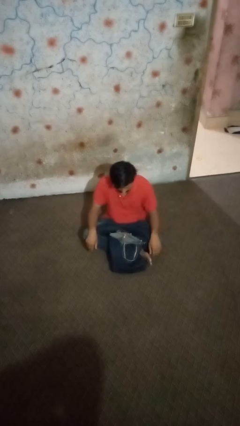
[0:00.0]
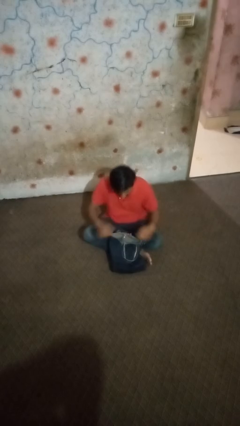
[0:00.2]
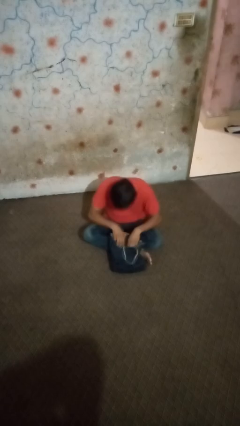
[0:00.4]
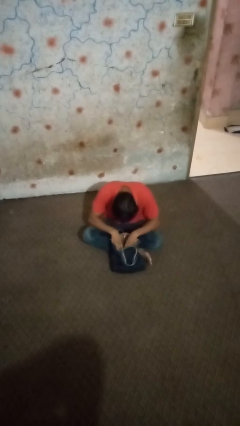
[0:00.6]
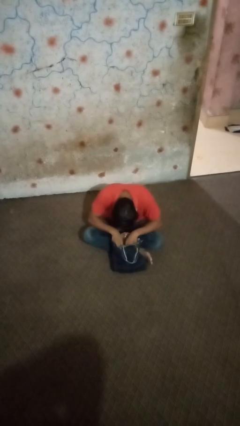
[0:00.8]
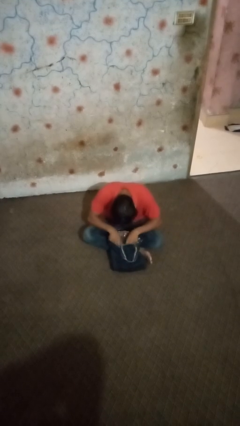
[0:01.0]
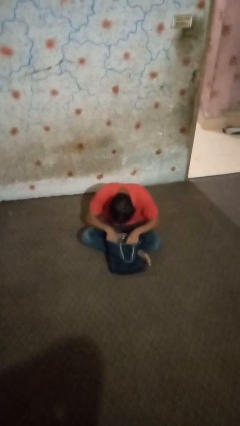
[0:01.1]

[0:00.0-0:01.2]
person searches in bag

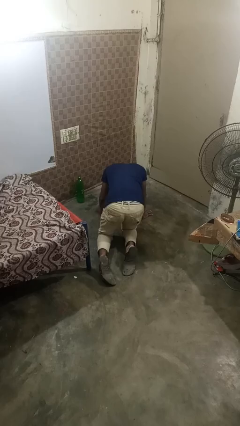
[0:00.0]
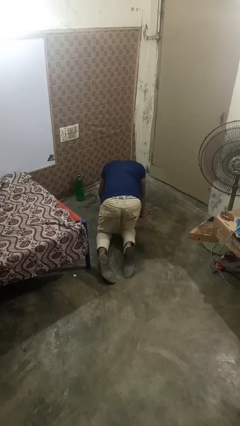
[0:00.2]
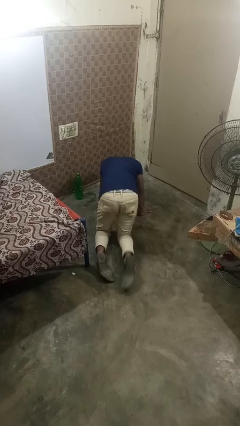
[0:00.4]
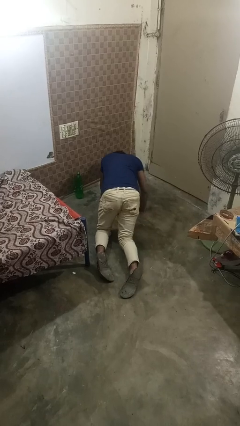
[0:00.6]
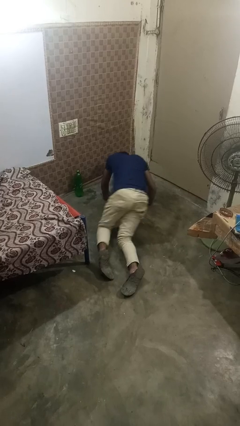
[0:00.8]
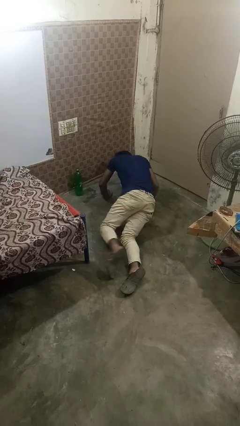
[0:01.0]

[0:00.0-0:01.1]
person lies down on floor

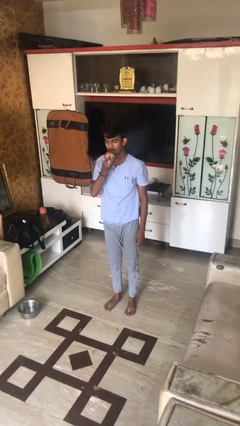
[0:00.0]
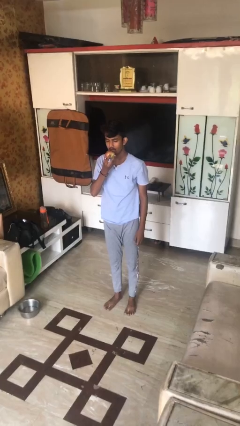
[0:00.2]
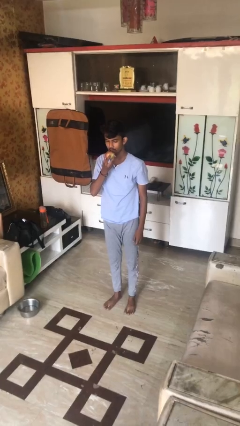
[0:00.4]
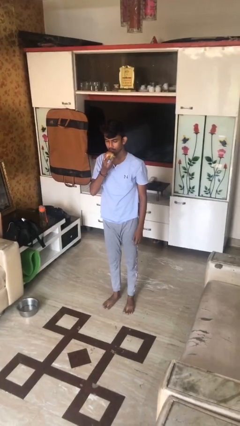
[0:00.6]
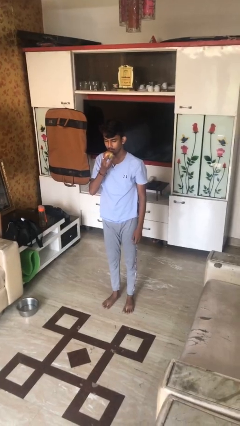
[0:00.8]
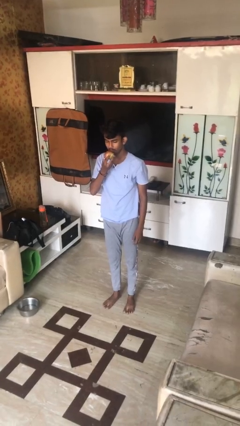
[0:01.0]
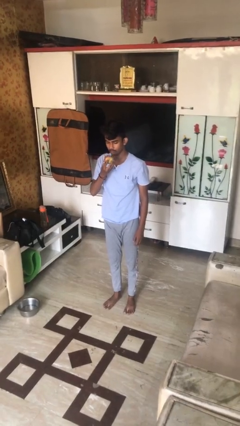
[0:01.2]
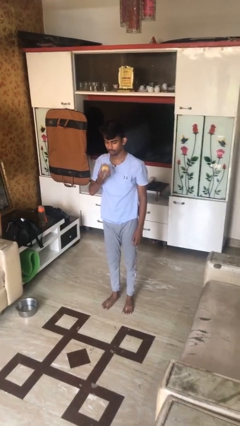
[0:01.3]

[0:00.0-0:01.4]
person eats apple

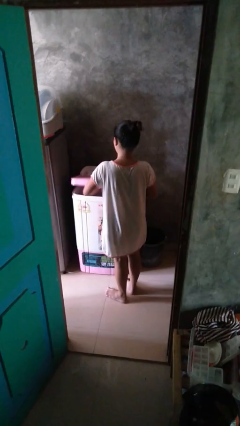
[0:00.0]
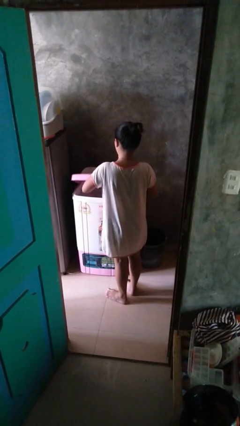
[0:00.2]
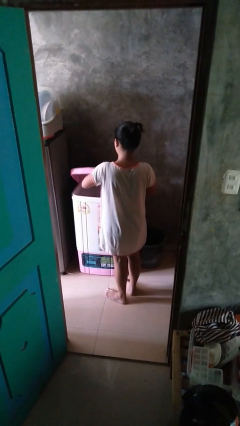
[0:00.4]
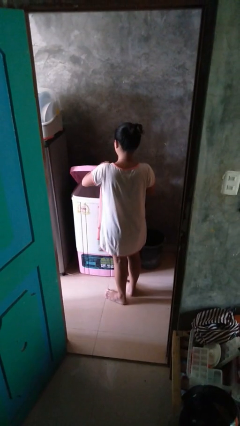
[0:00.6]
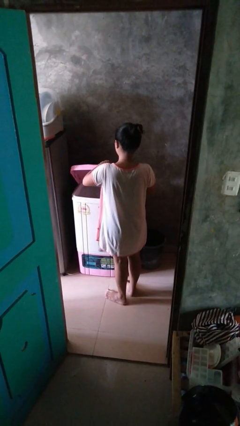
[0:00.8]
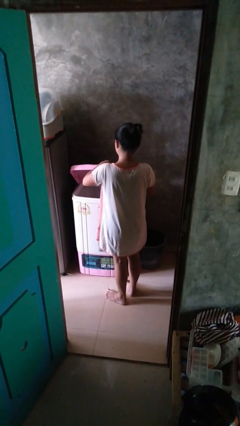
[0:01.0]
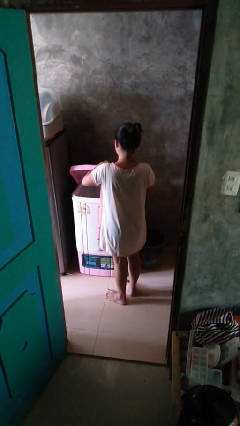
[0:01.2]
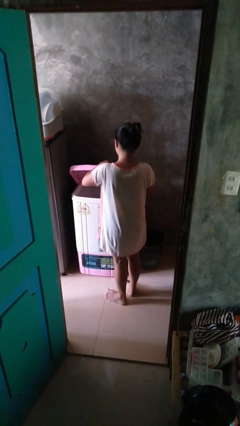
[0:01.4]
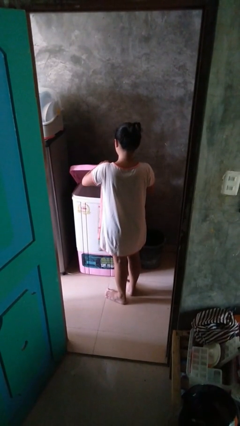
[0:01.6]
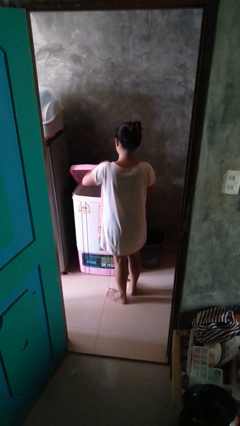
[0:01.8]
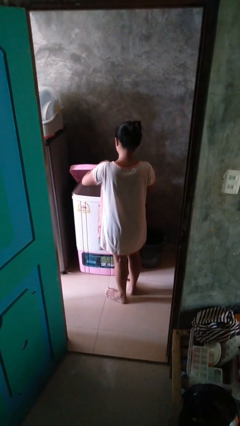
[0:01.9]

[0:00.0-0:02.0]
person opens clothes washer

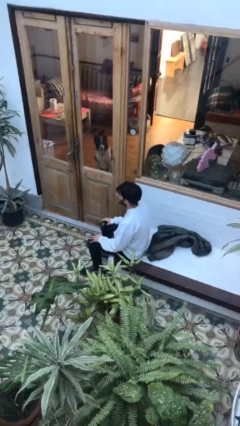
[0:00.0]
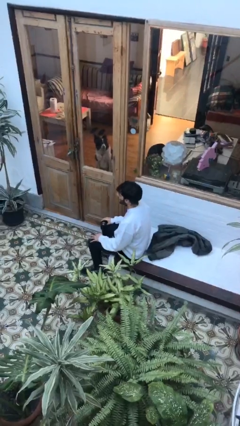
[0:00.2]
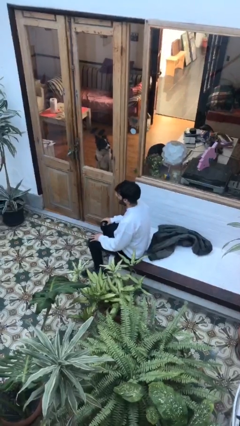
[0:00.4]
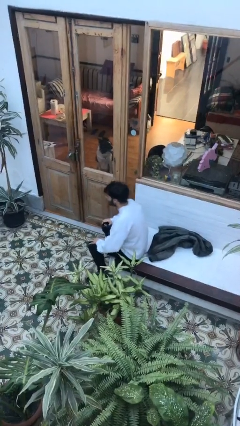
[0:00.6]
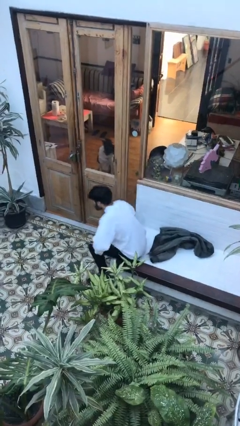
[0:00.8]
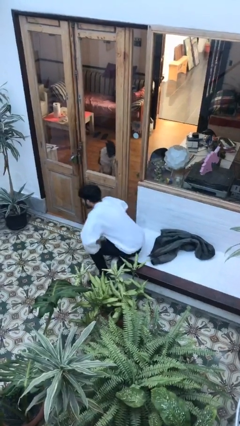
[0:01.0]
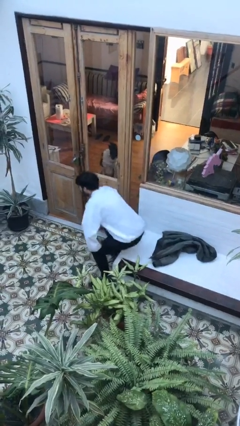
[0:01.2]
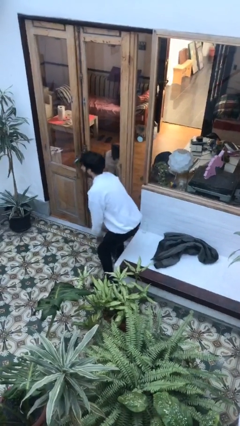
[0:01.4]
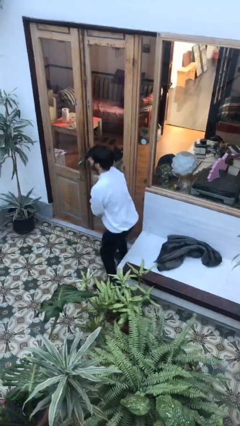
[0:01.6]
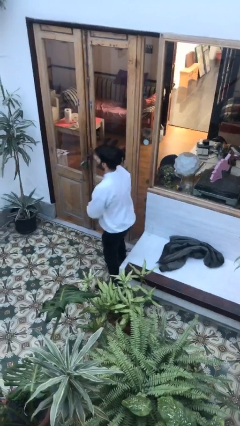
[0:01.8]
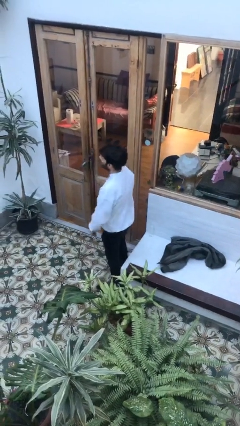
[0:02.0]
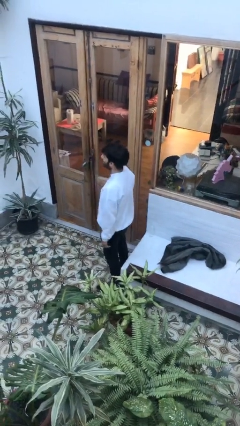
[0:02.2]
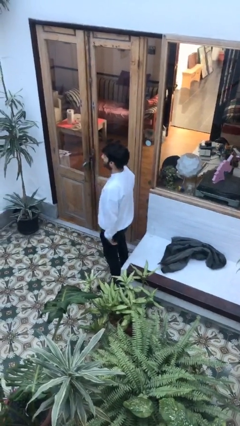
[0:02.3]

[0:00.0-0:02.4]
person stands up

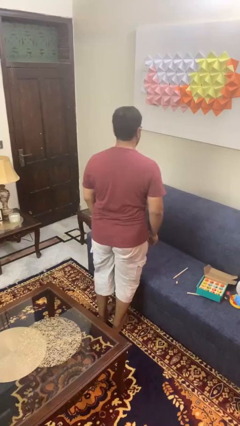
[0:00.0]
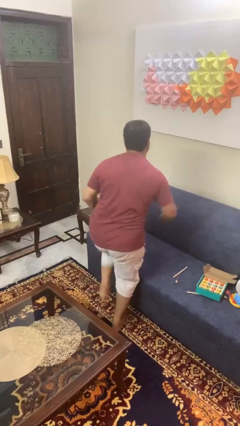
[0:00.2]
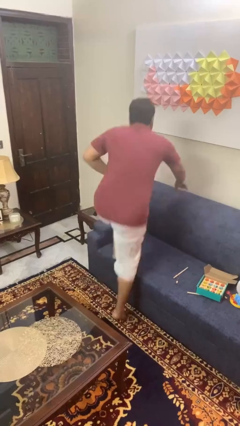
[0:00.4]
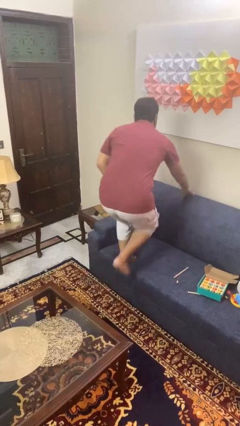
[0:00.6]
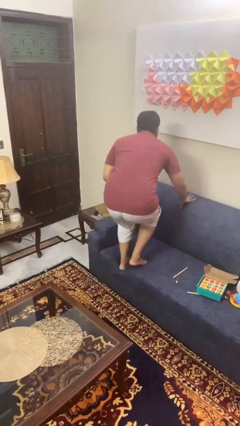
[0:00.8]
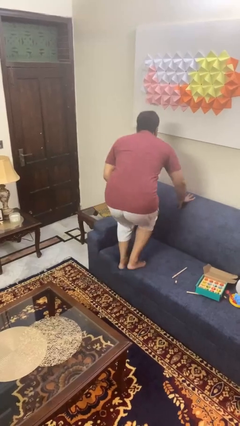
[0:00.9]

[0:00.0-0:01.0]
person jumps on couch

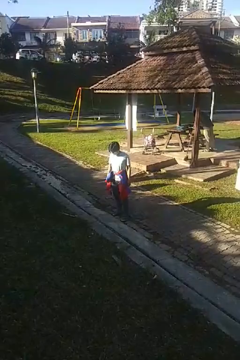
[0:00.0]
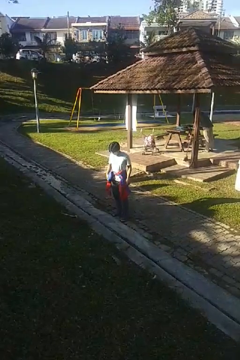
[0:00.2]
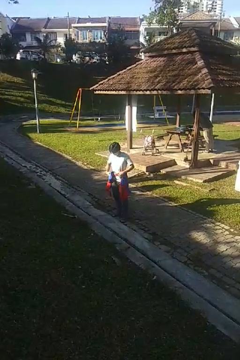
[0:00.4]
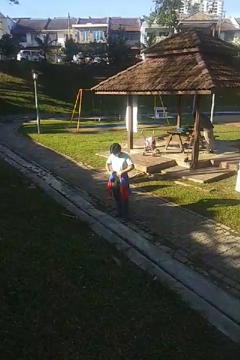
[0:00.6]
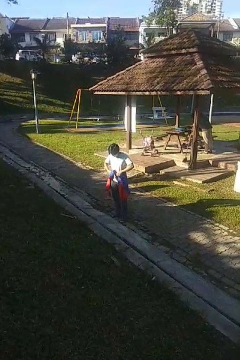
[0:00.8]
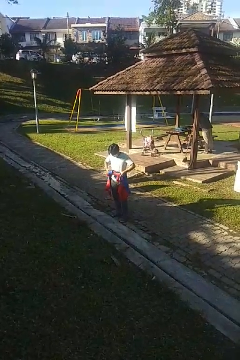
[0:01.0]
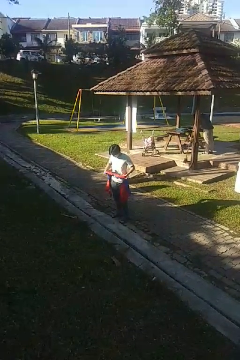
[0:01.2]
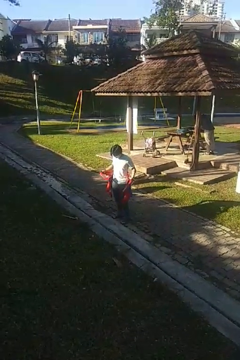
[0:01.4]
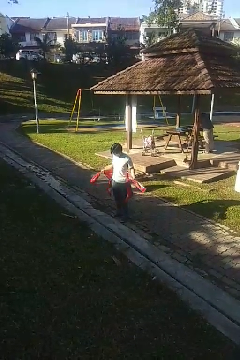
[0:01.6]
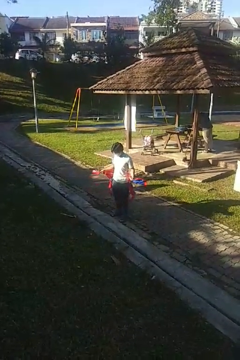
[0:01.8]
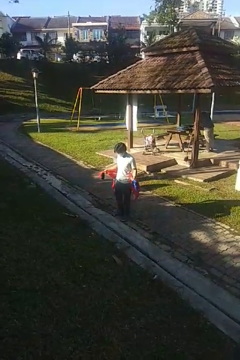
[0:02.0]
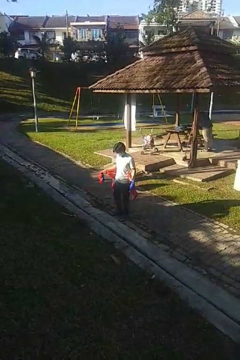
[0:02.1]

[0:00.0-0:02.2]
person unties jacket around waist

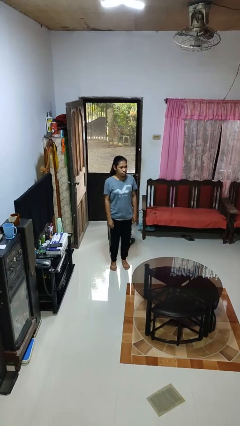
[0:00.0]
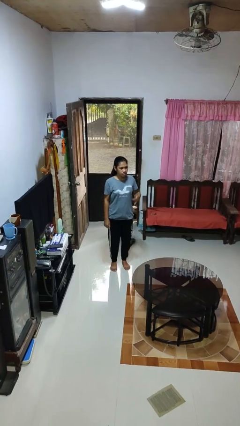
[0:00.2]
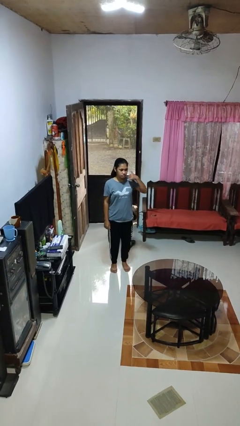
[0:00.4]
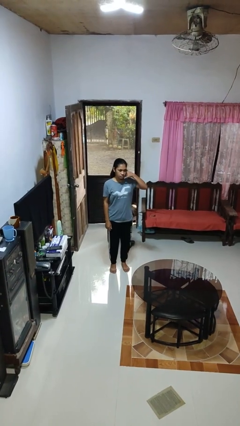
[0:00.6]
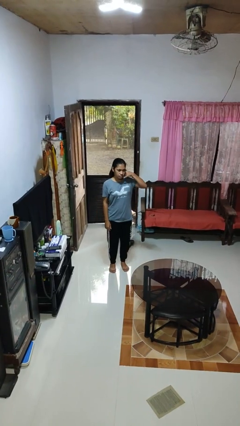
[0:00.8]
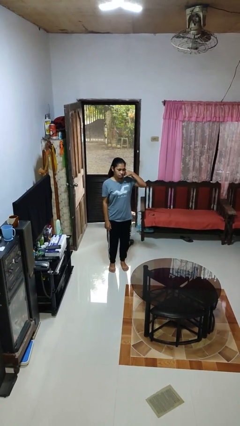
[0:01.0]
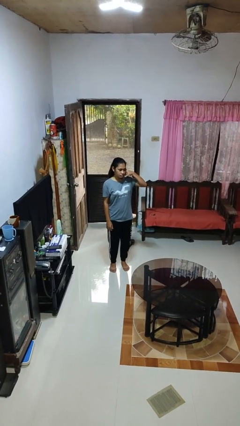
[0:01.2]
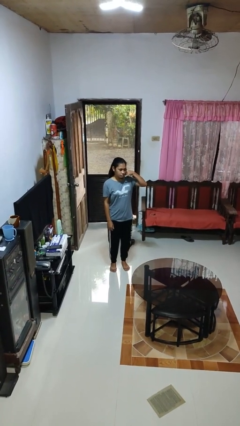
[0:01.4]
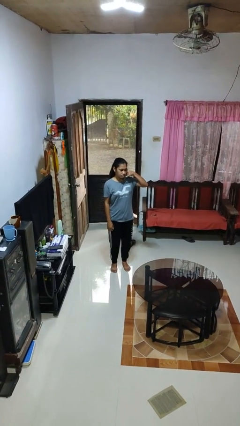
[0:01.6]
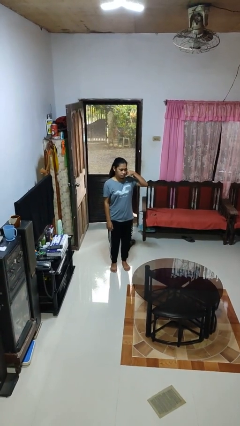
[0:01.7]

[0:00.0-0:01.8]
person gestures call me

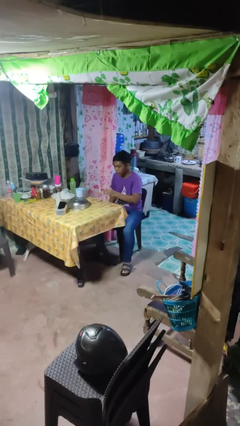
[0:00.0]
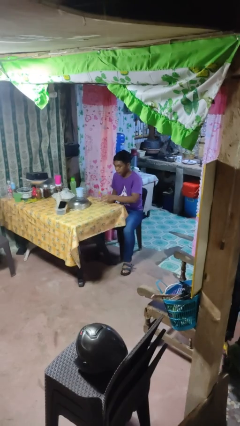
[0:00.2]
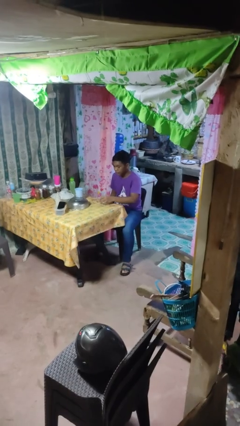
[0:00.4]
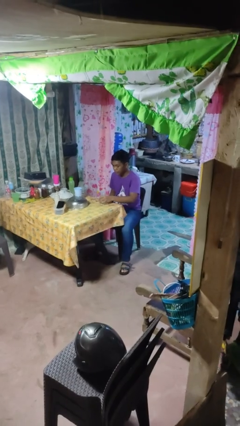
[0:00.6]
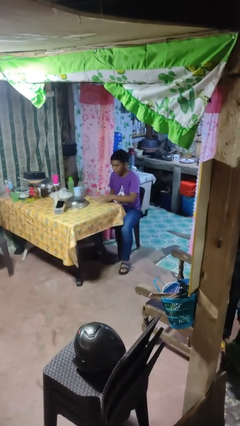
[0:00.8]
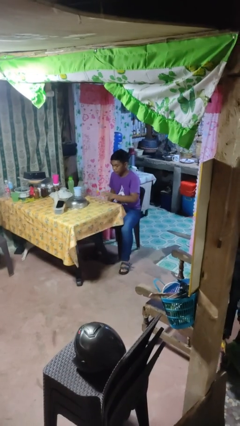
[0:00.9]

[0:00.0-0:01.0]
person puts down object on table

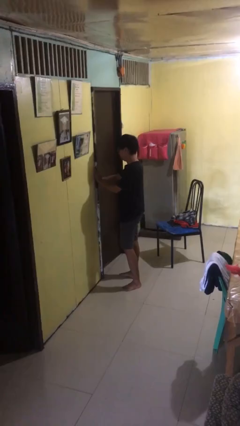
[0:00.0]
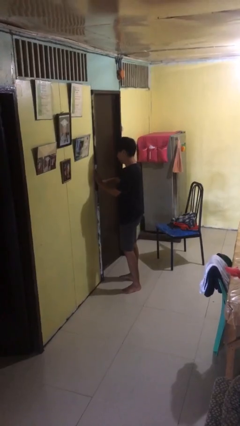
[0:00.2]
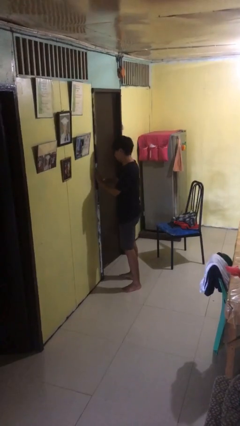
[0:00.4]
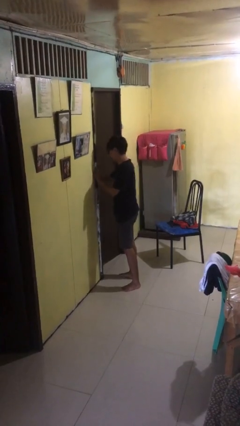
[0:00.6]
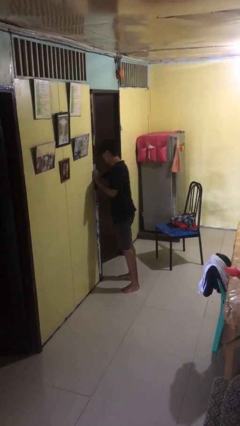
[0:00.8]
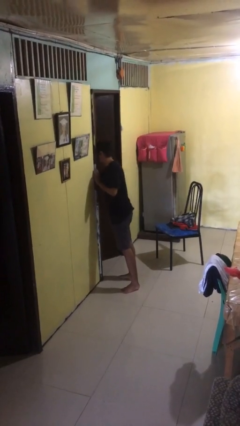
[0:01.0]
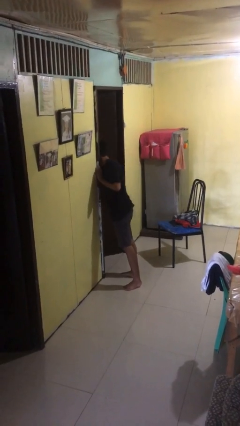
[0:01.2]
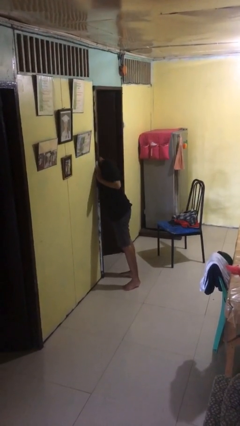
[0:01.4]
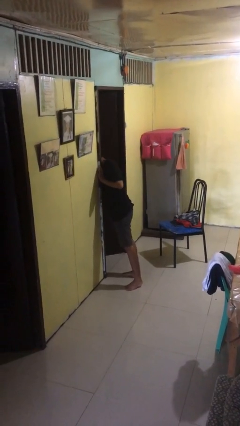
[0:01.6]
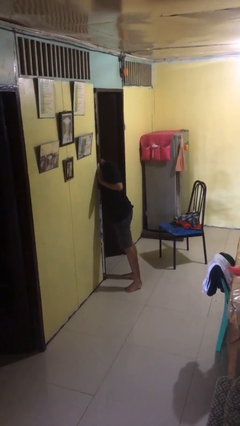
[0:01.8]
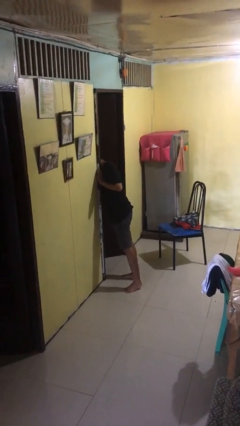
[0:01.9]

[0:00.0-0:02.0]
person opens facility door

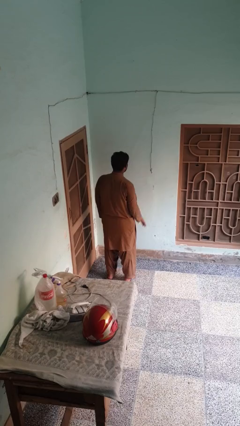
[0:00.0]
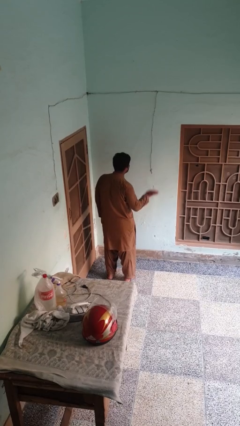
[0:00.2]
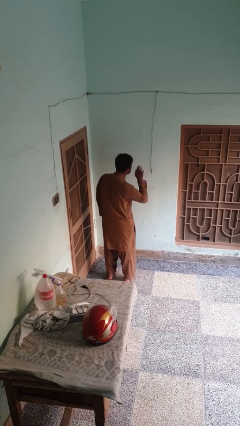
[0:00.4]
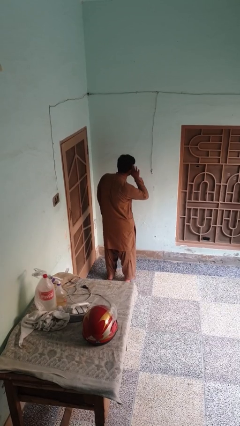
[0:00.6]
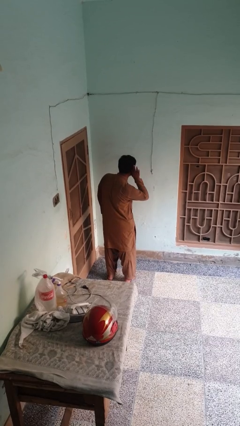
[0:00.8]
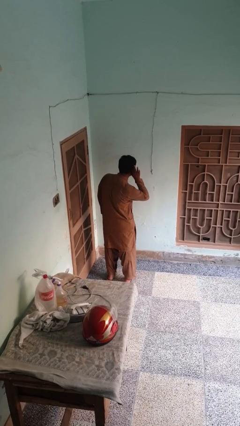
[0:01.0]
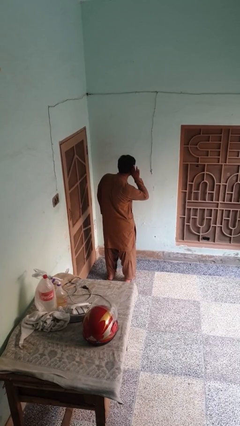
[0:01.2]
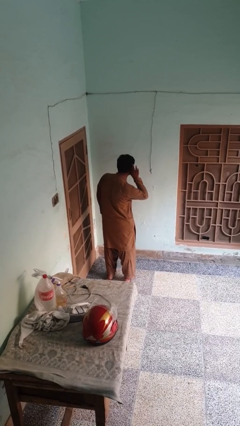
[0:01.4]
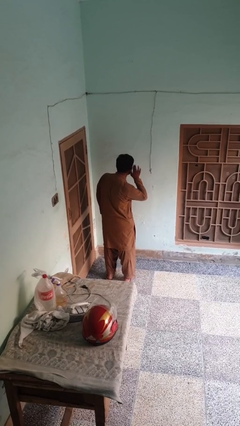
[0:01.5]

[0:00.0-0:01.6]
person gestures listen closely
